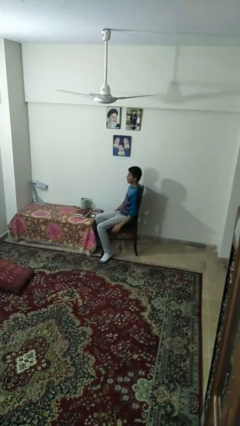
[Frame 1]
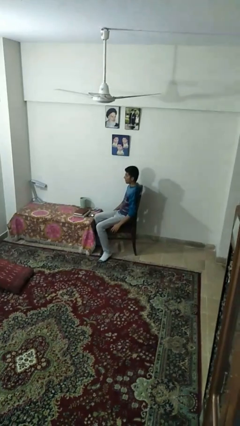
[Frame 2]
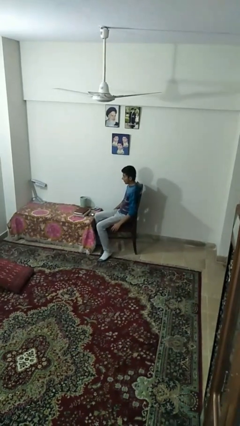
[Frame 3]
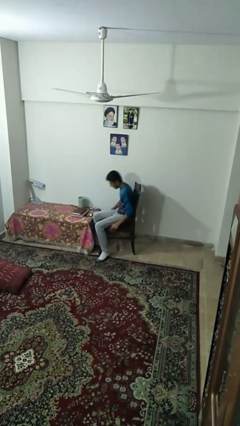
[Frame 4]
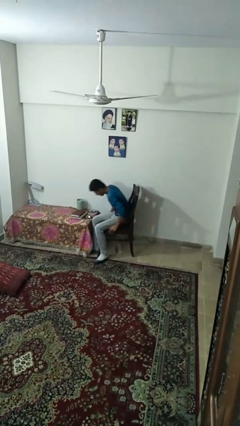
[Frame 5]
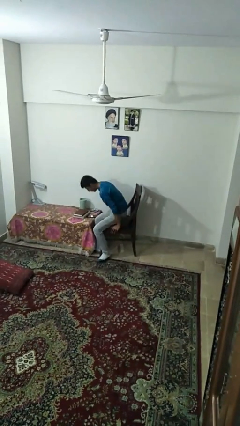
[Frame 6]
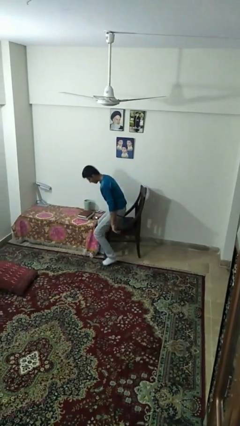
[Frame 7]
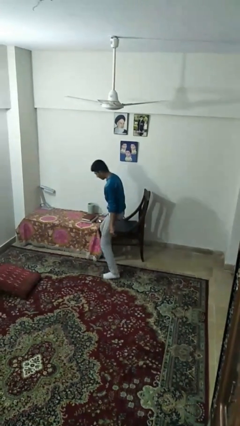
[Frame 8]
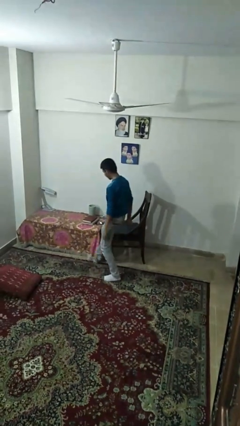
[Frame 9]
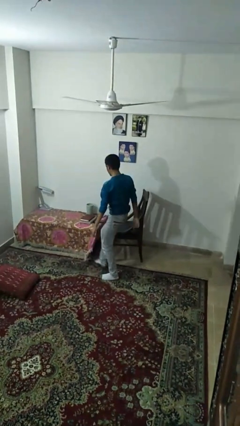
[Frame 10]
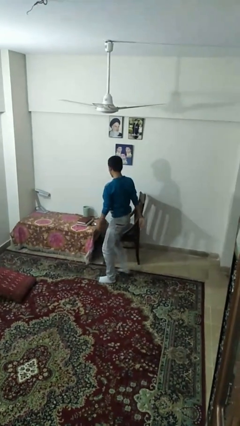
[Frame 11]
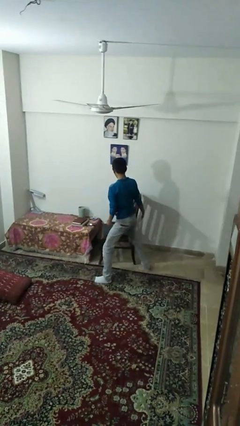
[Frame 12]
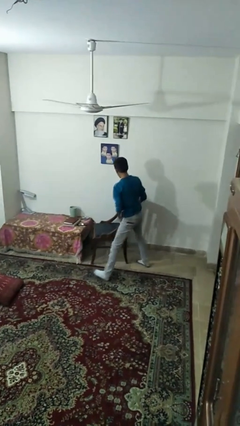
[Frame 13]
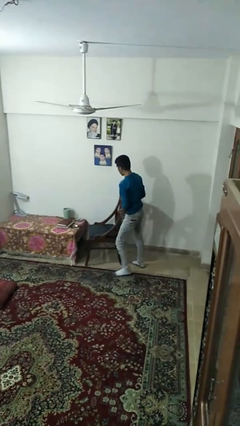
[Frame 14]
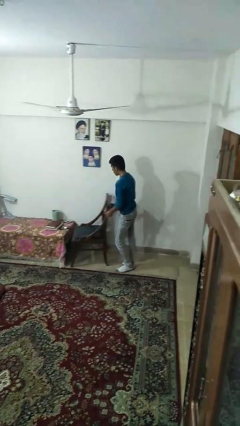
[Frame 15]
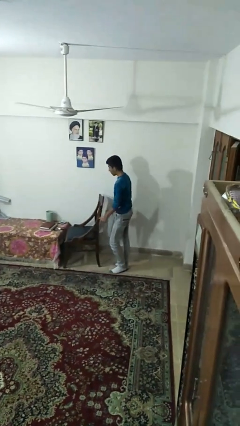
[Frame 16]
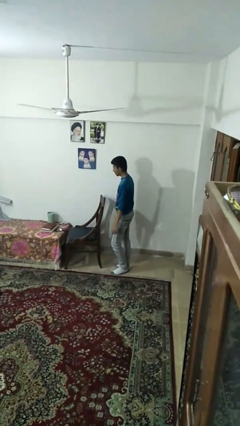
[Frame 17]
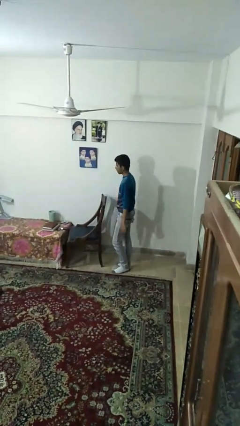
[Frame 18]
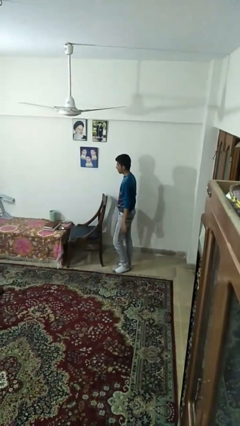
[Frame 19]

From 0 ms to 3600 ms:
person stands up

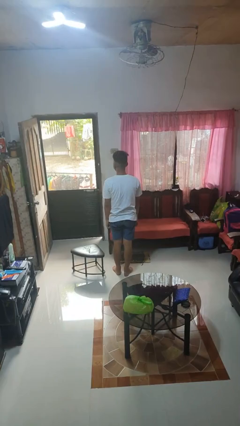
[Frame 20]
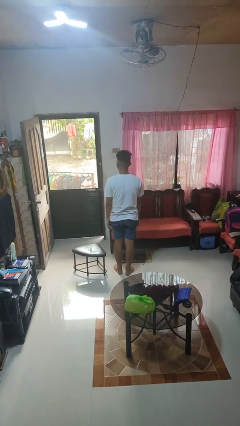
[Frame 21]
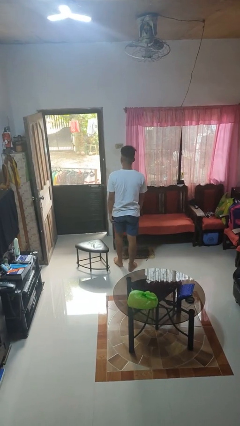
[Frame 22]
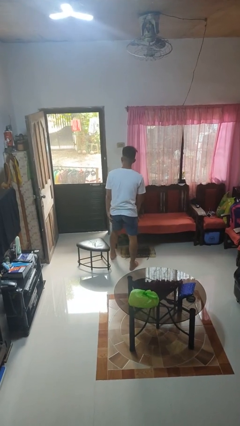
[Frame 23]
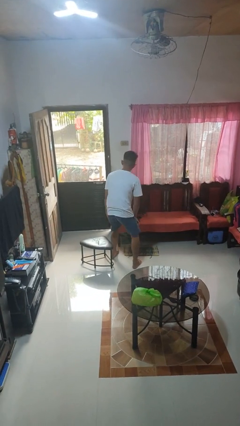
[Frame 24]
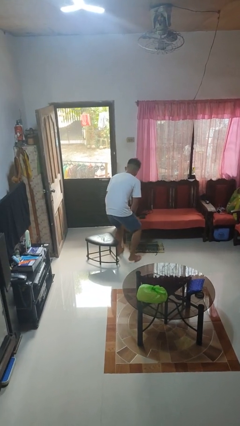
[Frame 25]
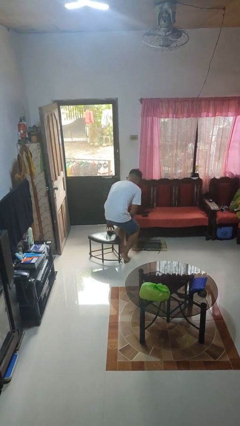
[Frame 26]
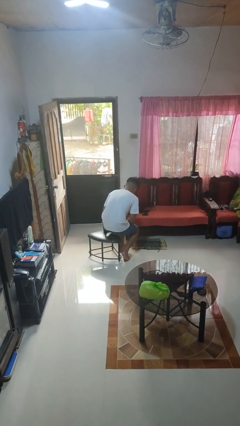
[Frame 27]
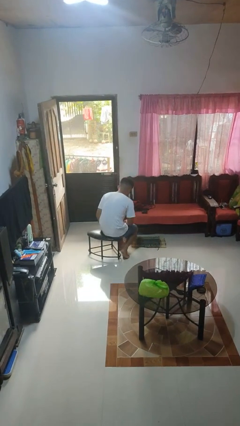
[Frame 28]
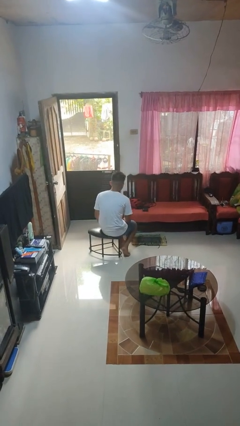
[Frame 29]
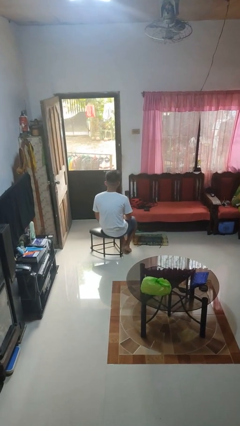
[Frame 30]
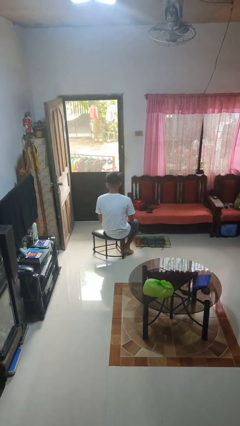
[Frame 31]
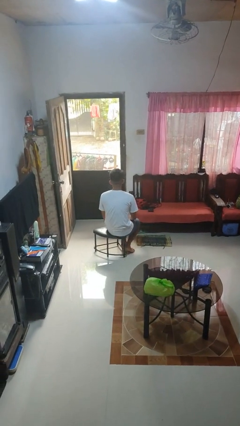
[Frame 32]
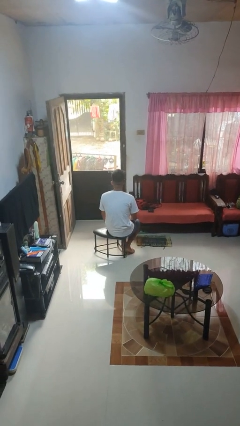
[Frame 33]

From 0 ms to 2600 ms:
person sits down

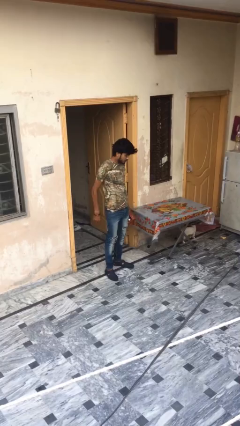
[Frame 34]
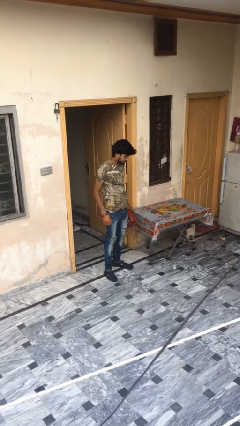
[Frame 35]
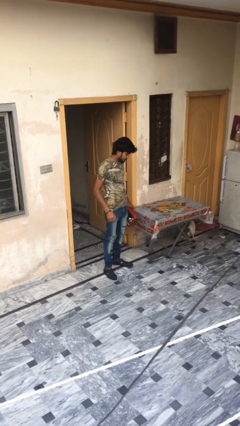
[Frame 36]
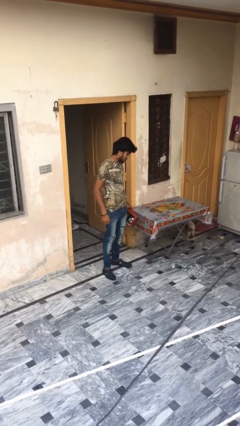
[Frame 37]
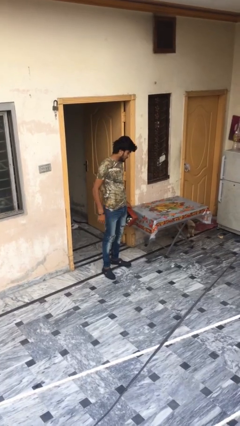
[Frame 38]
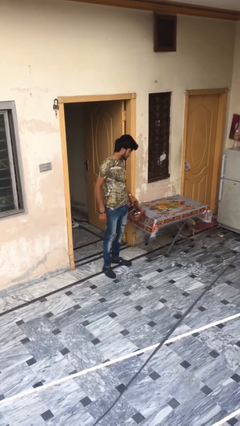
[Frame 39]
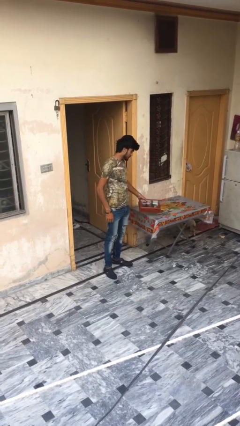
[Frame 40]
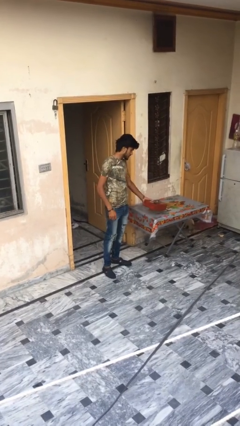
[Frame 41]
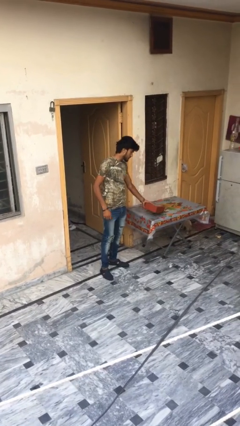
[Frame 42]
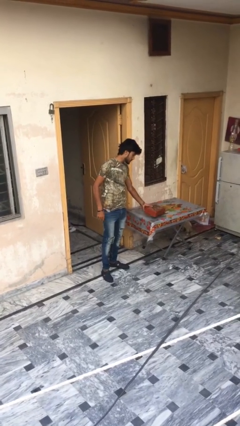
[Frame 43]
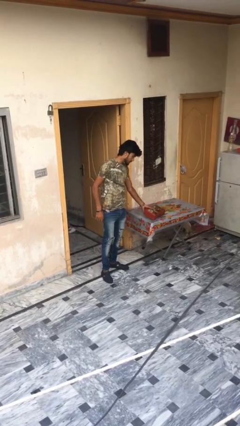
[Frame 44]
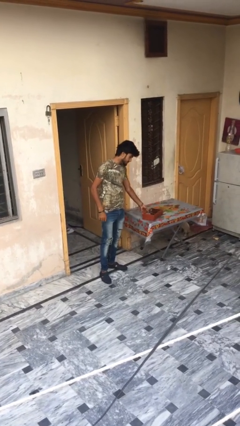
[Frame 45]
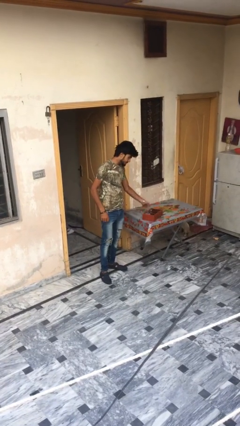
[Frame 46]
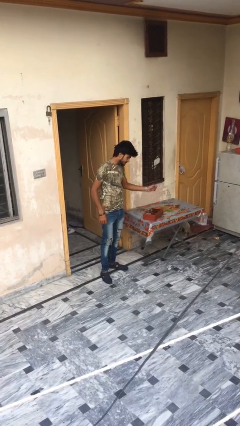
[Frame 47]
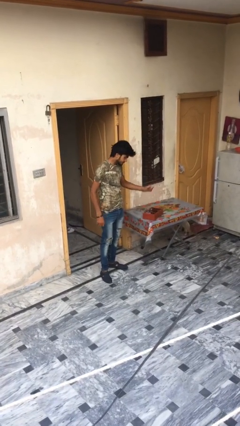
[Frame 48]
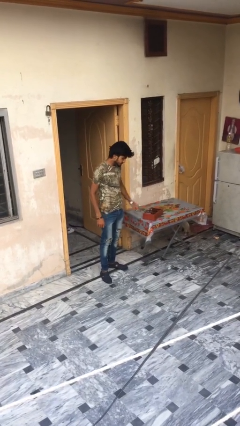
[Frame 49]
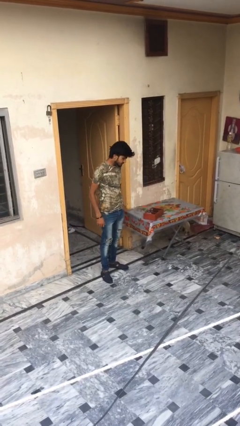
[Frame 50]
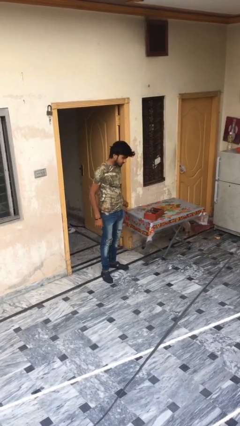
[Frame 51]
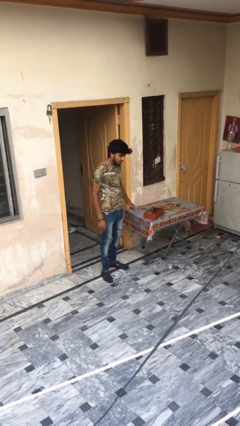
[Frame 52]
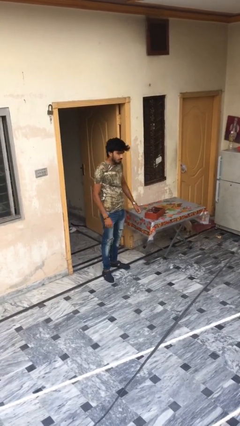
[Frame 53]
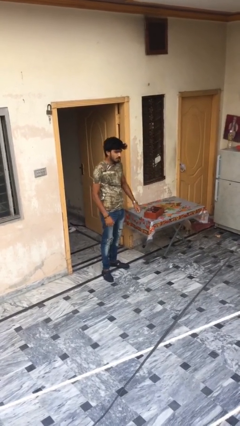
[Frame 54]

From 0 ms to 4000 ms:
person puts down object on table

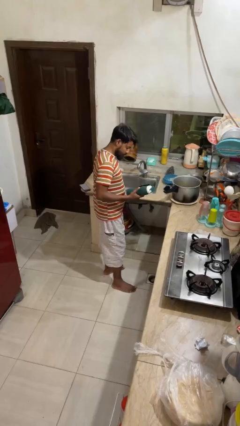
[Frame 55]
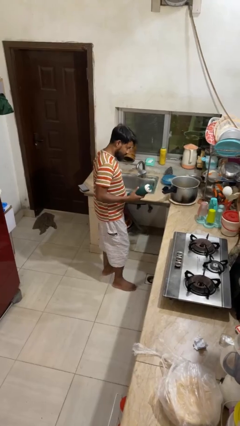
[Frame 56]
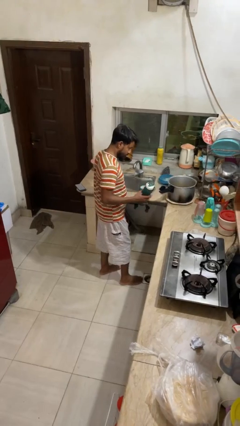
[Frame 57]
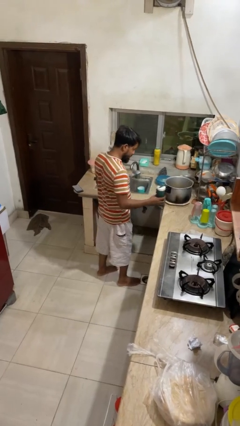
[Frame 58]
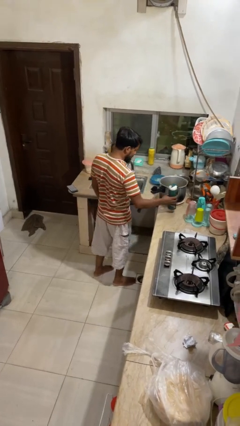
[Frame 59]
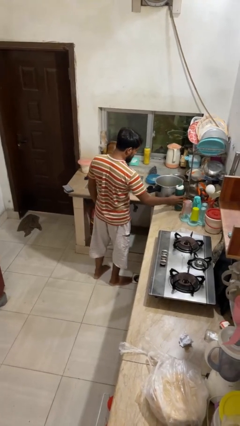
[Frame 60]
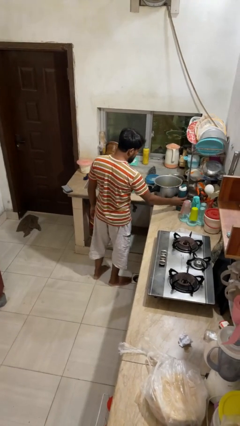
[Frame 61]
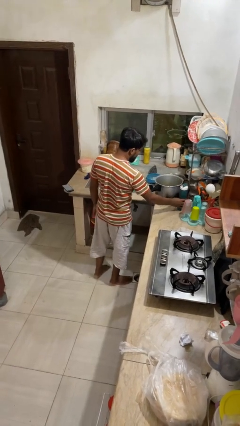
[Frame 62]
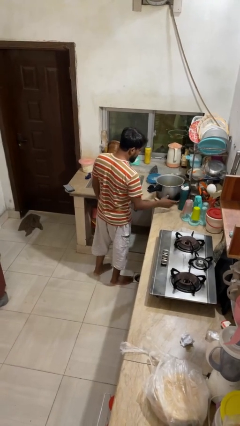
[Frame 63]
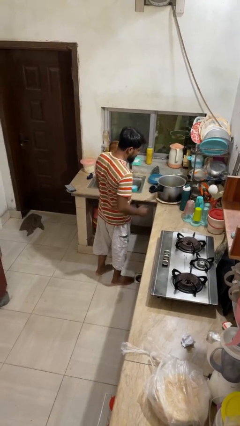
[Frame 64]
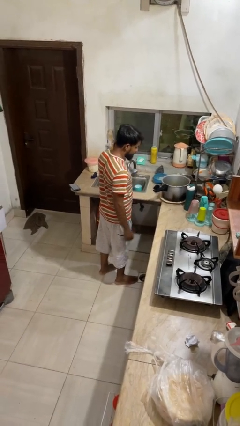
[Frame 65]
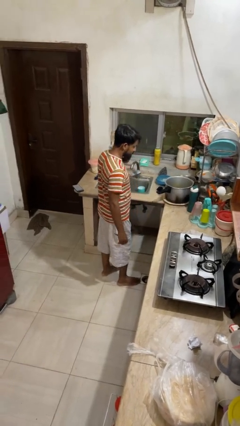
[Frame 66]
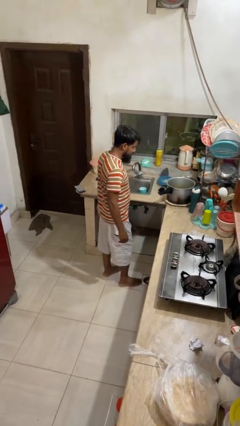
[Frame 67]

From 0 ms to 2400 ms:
person puts down object on countertop

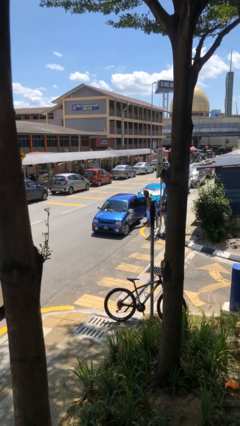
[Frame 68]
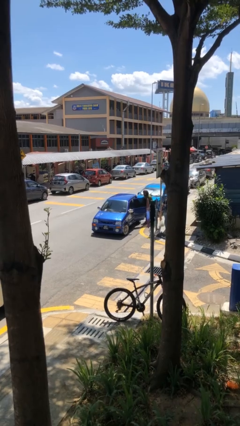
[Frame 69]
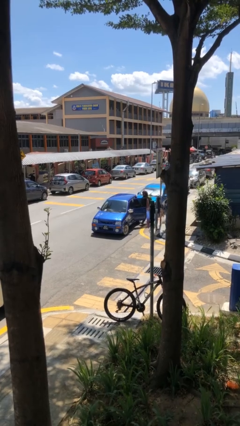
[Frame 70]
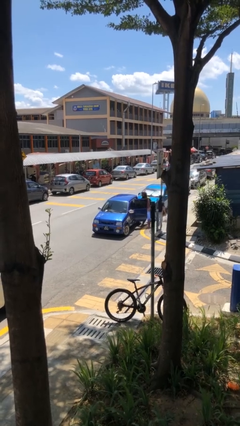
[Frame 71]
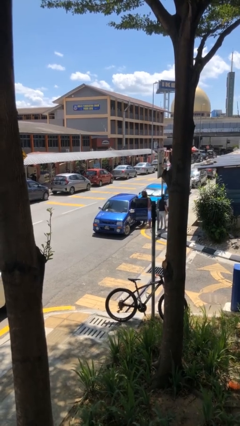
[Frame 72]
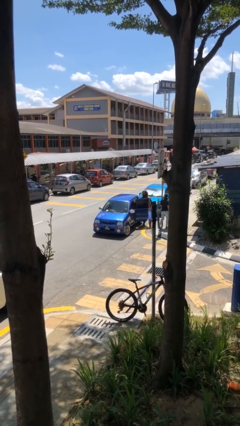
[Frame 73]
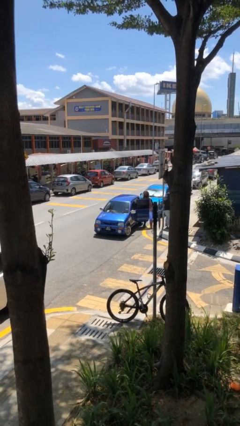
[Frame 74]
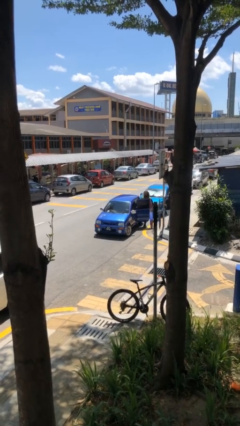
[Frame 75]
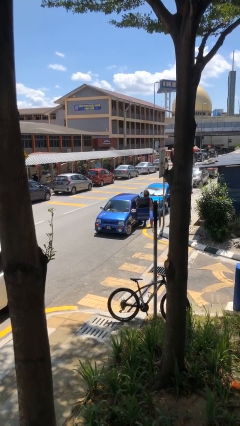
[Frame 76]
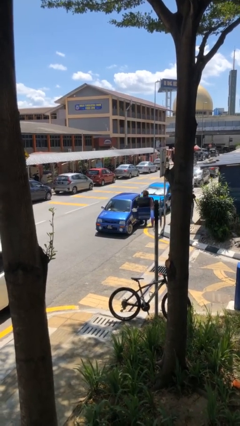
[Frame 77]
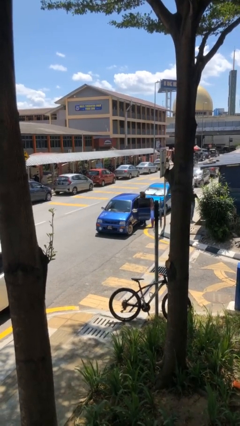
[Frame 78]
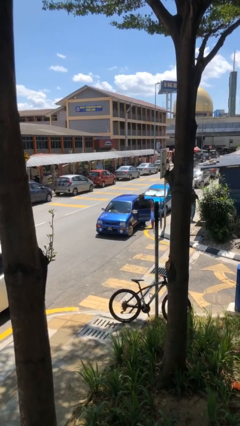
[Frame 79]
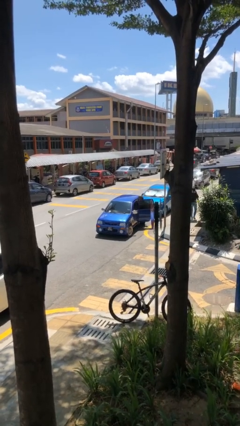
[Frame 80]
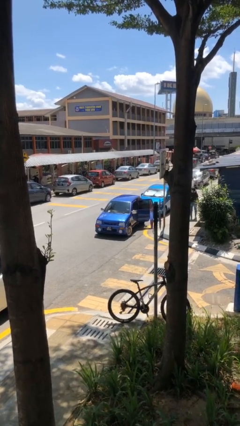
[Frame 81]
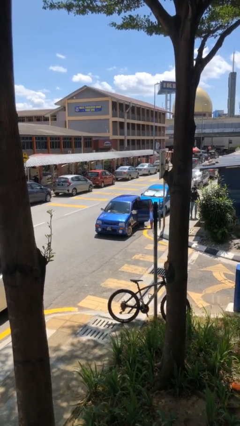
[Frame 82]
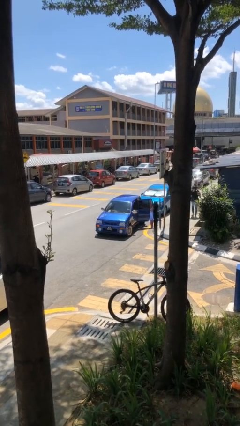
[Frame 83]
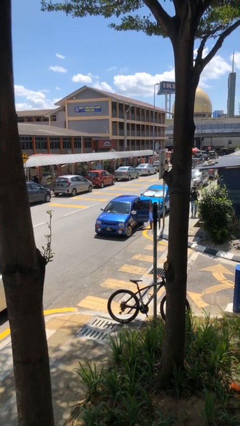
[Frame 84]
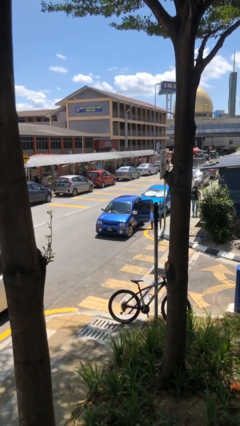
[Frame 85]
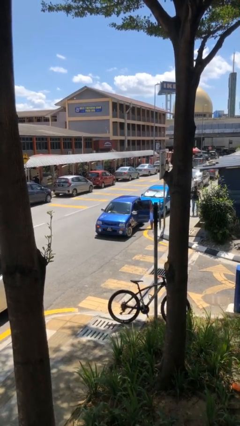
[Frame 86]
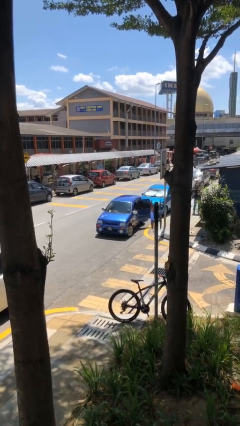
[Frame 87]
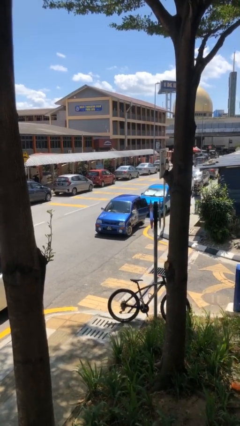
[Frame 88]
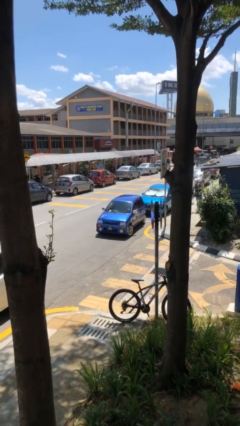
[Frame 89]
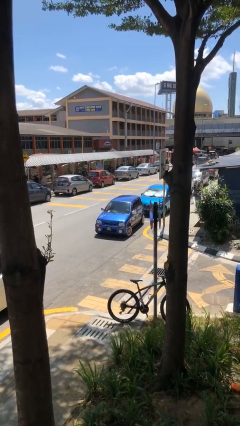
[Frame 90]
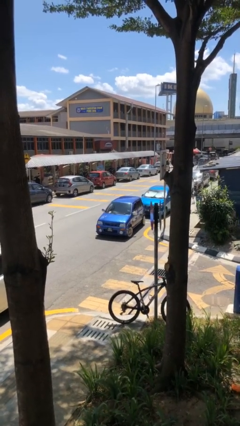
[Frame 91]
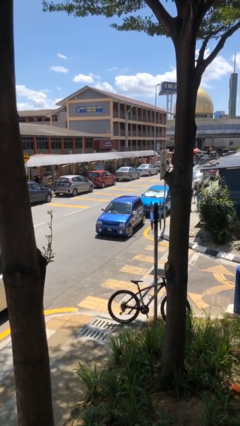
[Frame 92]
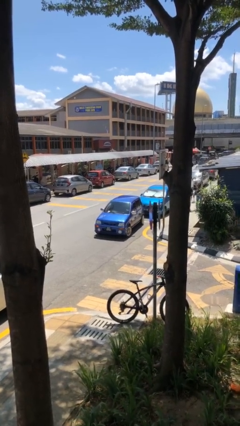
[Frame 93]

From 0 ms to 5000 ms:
car picks up person
